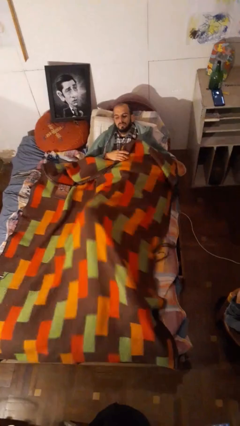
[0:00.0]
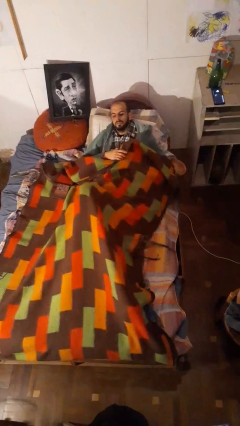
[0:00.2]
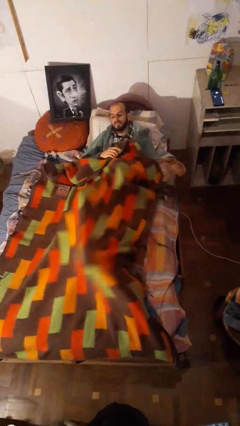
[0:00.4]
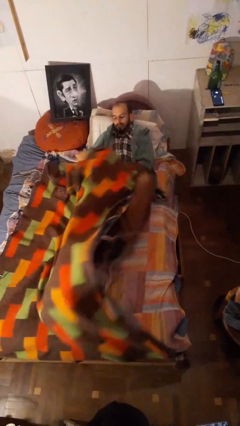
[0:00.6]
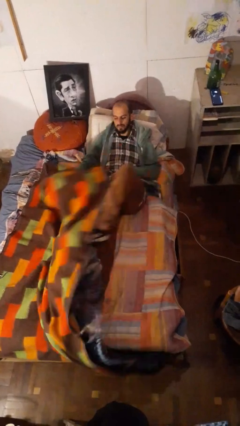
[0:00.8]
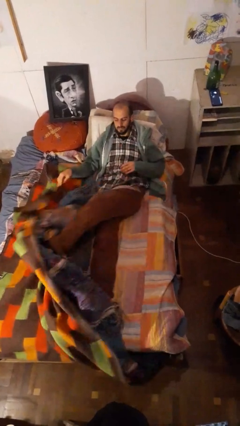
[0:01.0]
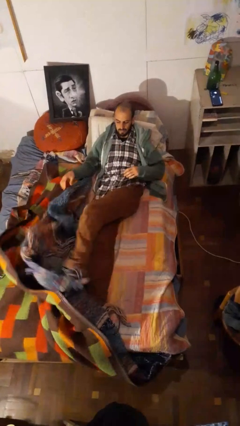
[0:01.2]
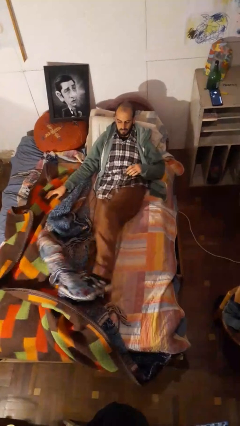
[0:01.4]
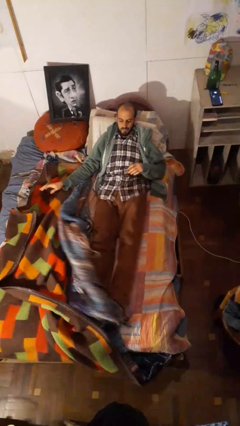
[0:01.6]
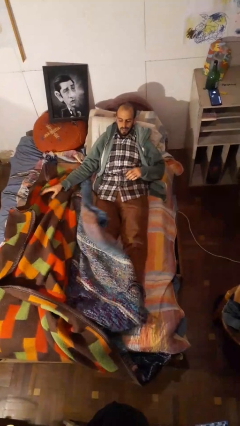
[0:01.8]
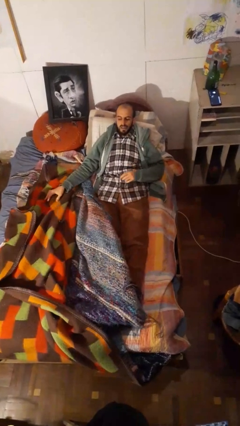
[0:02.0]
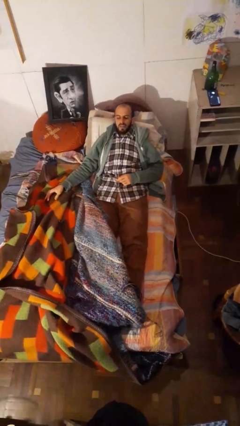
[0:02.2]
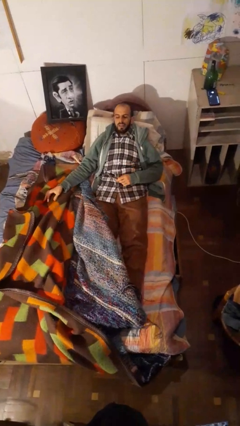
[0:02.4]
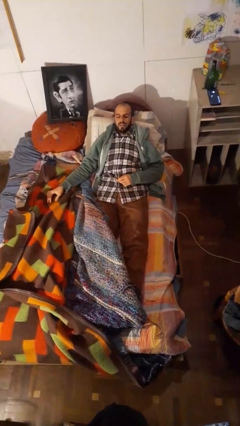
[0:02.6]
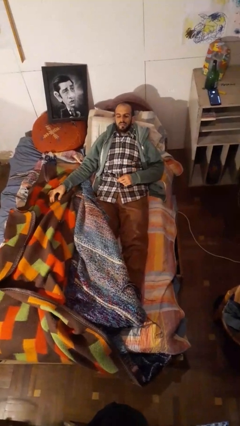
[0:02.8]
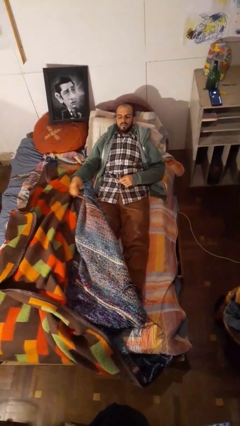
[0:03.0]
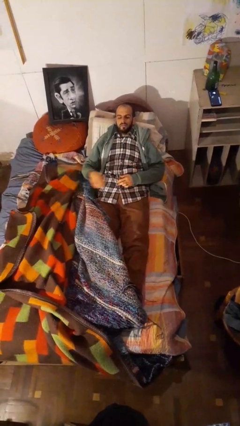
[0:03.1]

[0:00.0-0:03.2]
person uncovers with bedsheets

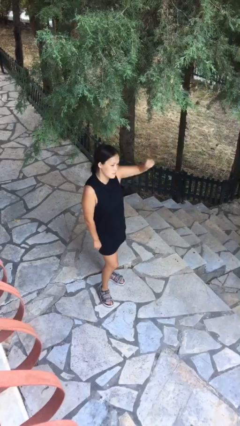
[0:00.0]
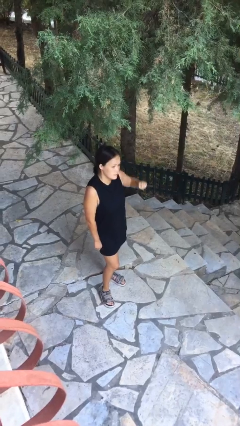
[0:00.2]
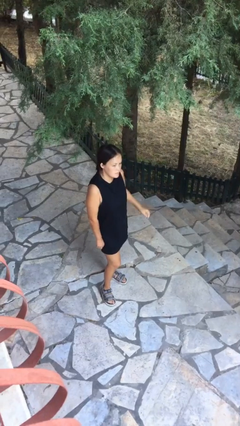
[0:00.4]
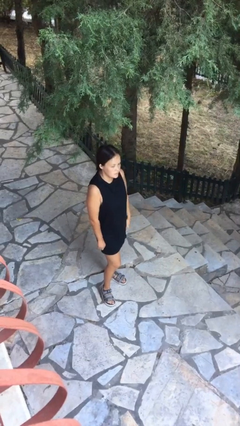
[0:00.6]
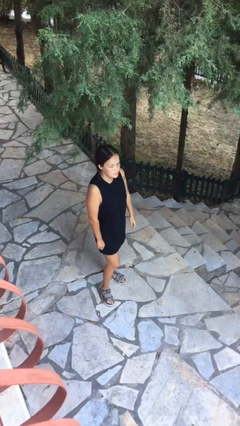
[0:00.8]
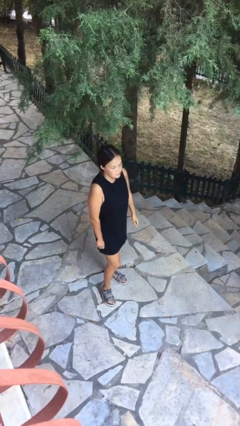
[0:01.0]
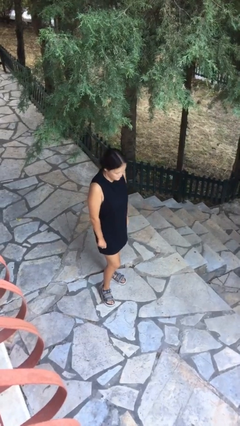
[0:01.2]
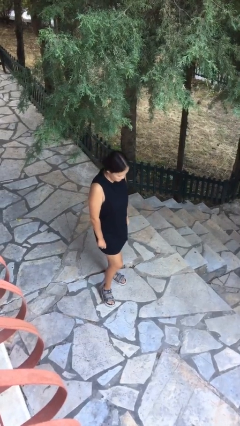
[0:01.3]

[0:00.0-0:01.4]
person gestures lower hand

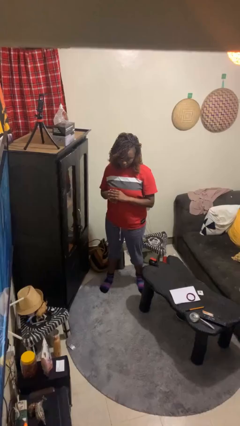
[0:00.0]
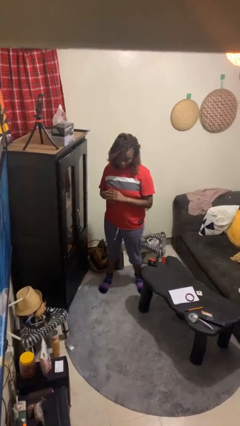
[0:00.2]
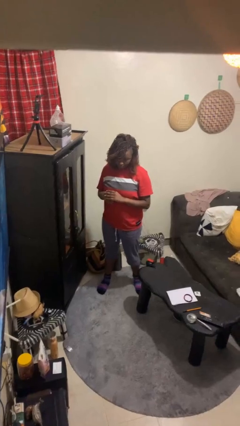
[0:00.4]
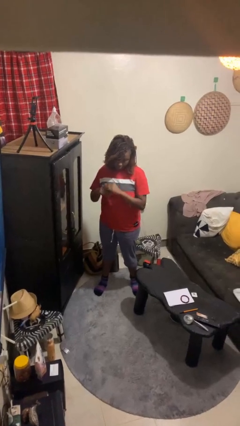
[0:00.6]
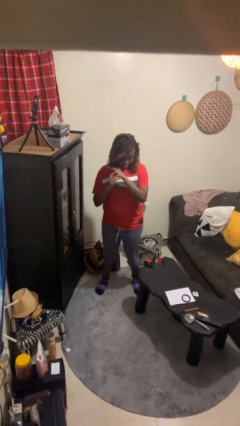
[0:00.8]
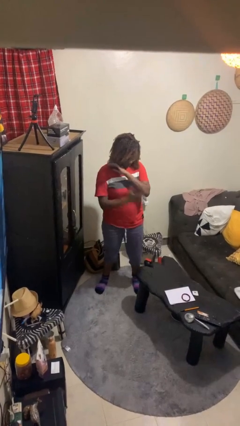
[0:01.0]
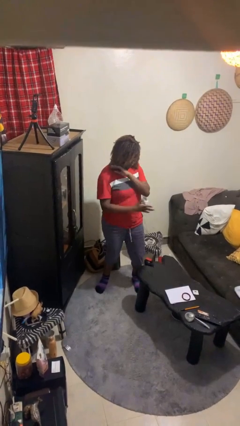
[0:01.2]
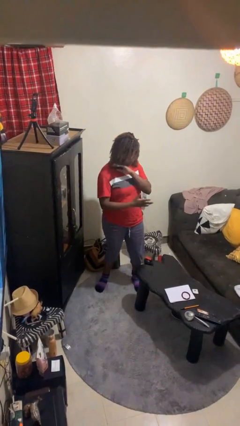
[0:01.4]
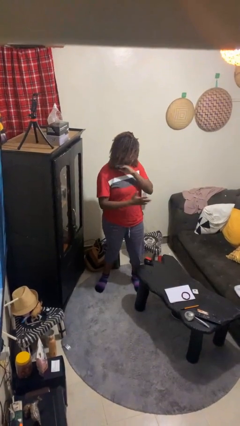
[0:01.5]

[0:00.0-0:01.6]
person karate chop

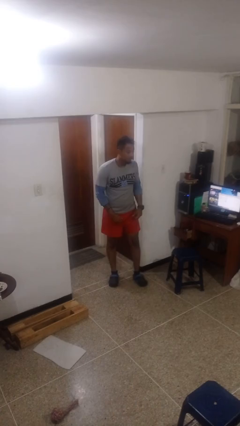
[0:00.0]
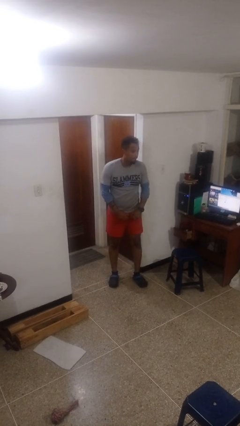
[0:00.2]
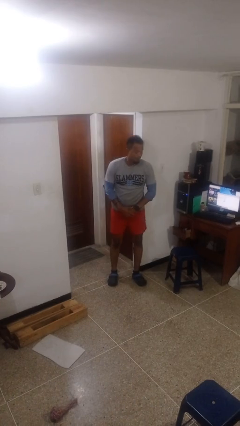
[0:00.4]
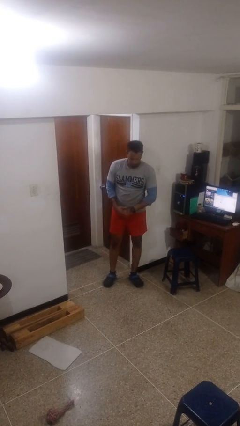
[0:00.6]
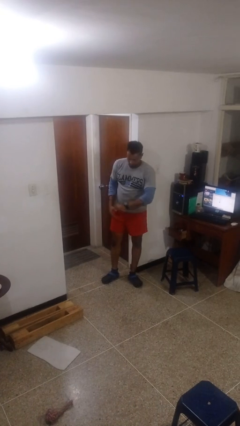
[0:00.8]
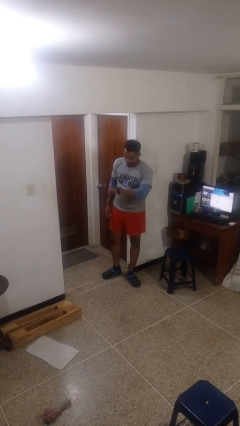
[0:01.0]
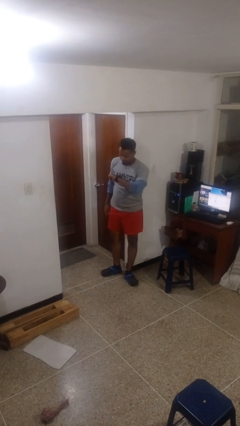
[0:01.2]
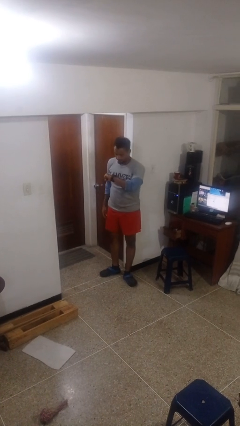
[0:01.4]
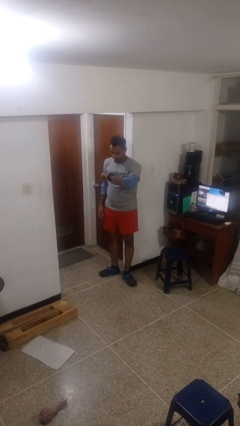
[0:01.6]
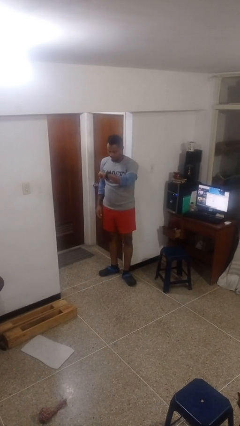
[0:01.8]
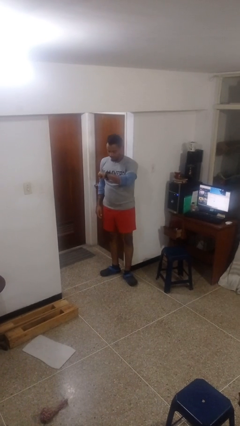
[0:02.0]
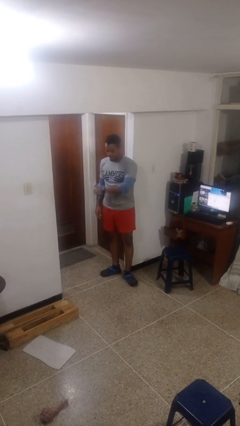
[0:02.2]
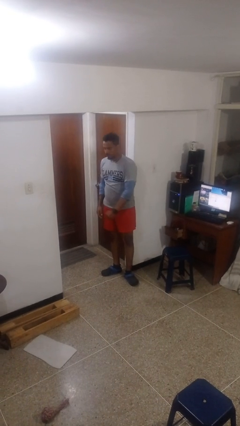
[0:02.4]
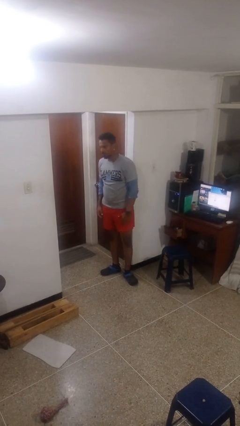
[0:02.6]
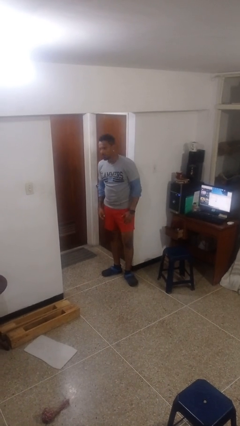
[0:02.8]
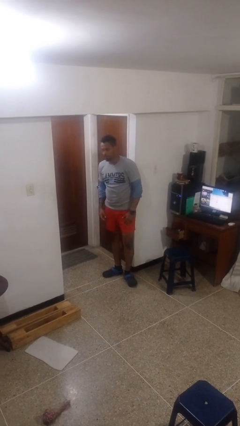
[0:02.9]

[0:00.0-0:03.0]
person looks at wristwatch

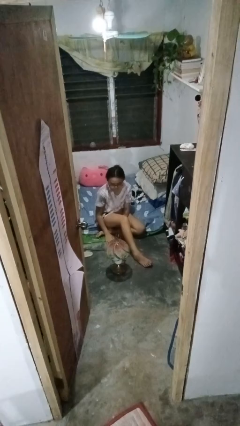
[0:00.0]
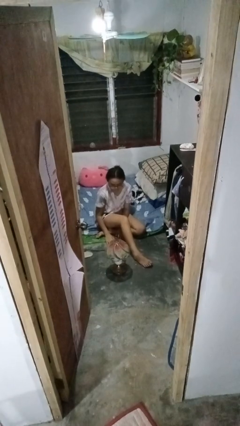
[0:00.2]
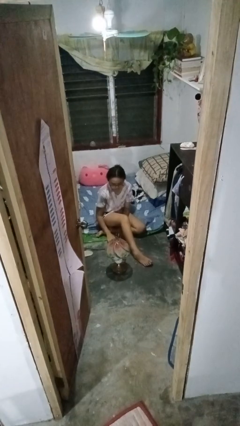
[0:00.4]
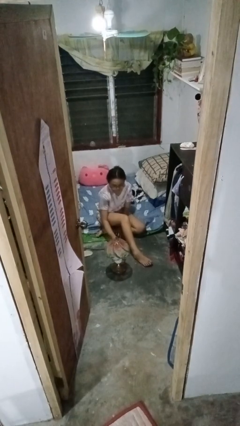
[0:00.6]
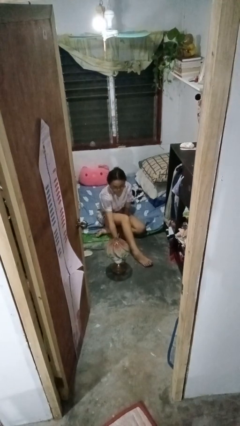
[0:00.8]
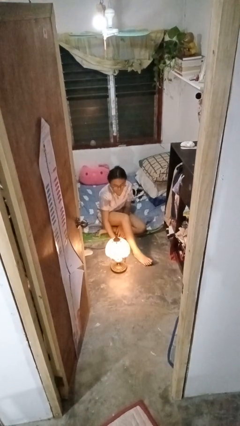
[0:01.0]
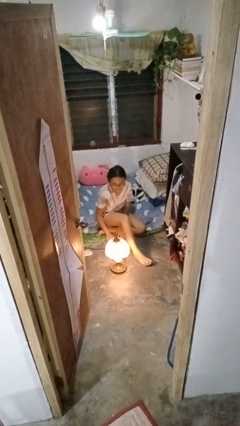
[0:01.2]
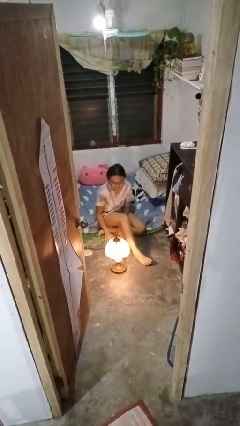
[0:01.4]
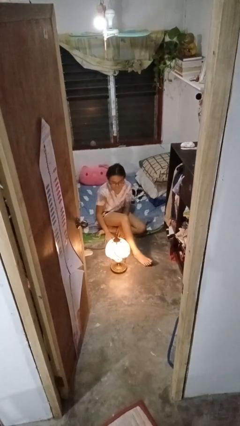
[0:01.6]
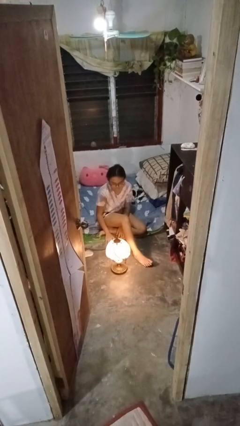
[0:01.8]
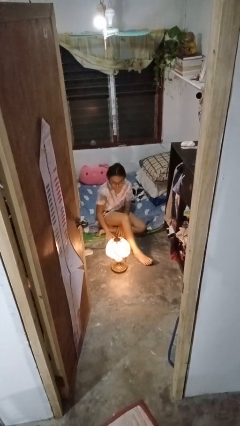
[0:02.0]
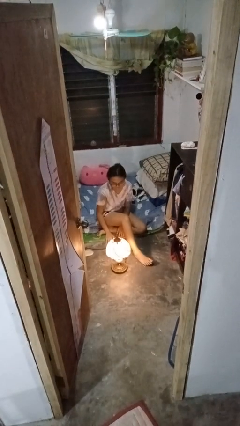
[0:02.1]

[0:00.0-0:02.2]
person turns on lamp

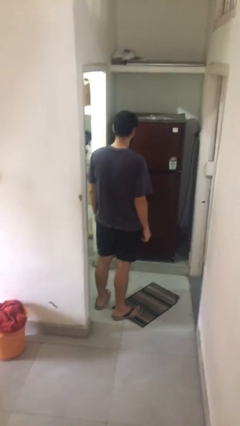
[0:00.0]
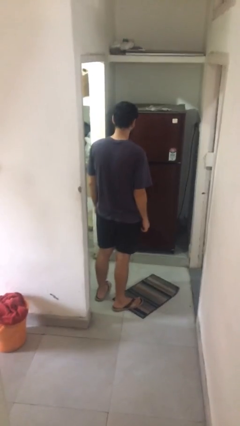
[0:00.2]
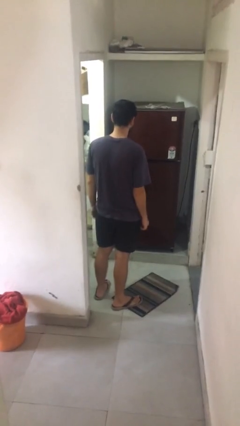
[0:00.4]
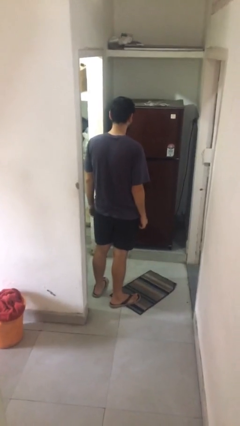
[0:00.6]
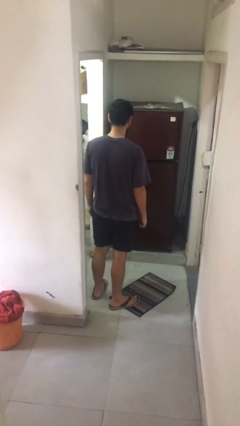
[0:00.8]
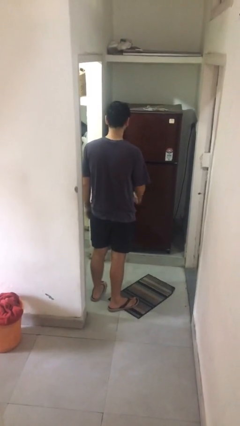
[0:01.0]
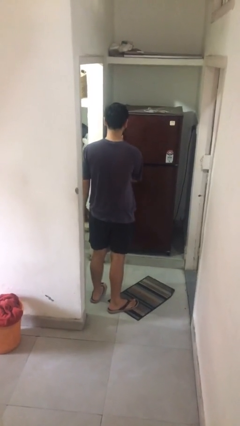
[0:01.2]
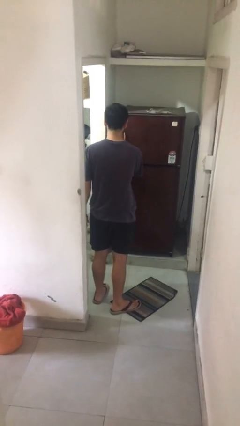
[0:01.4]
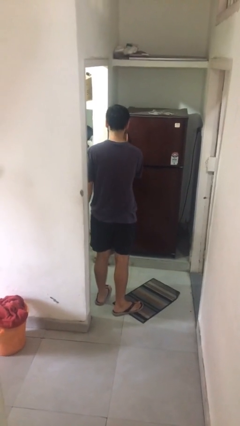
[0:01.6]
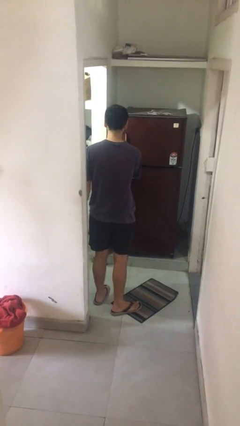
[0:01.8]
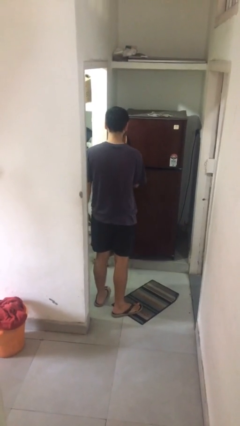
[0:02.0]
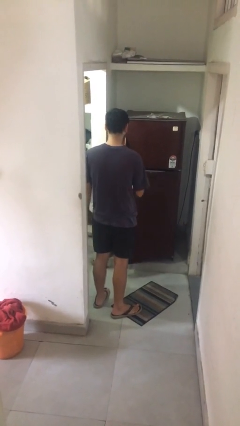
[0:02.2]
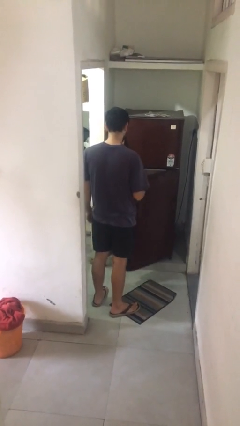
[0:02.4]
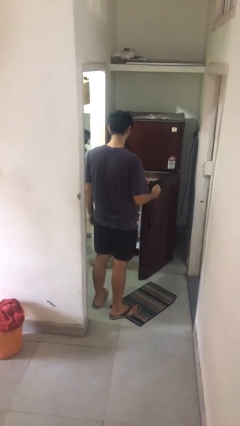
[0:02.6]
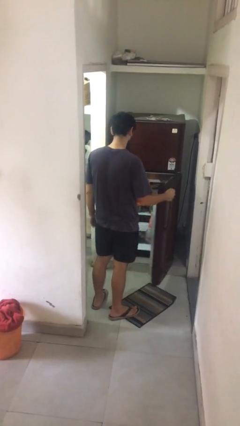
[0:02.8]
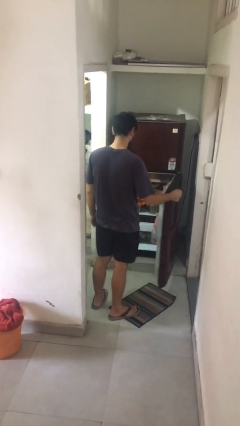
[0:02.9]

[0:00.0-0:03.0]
person opens refrigerator

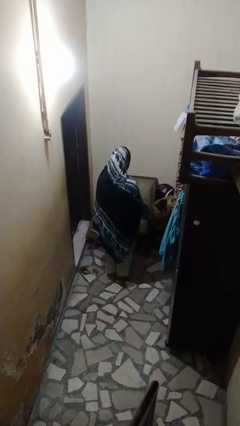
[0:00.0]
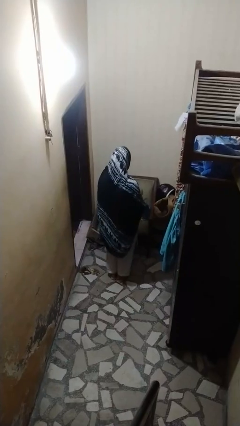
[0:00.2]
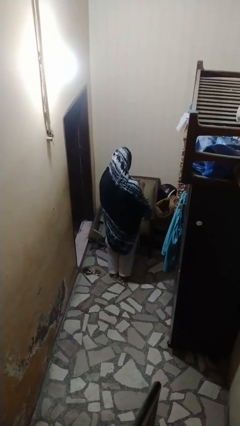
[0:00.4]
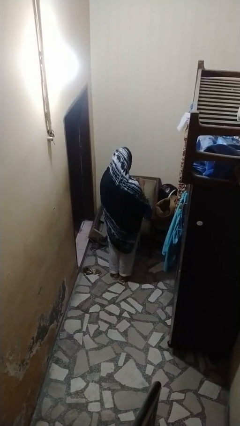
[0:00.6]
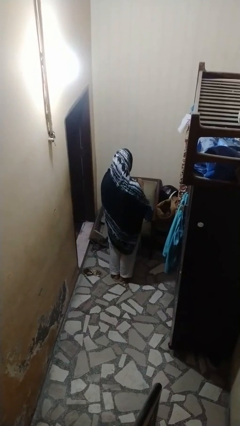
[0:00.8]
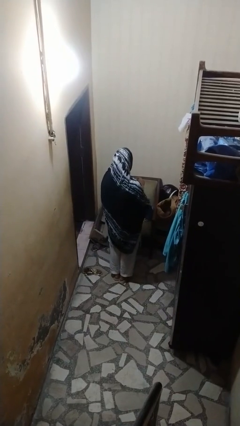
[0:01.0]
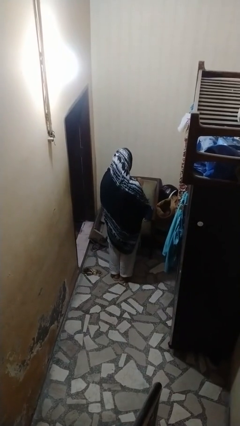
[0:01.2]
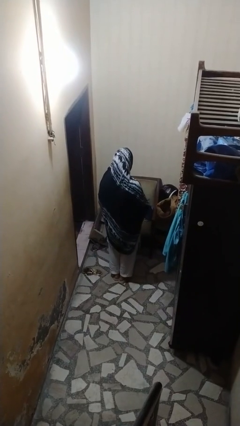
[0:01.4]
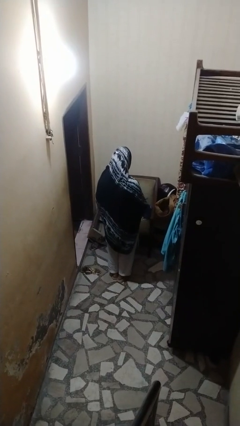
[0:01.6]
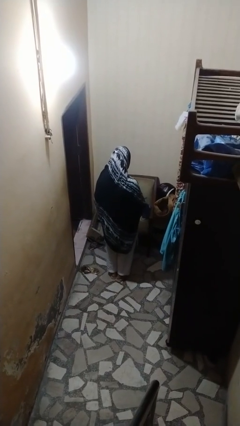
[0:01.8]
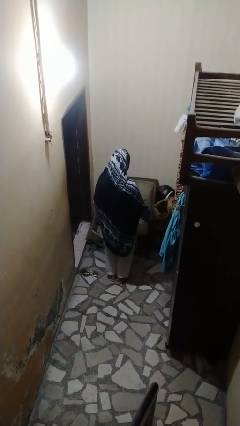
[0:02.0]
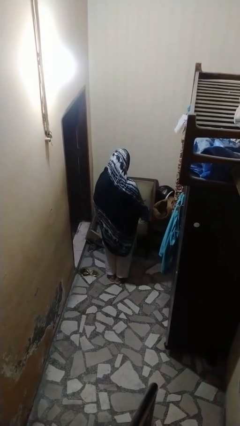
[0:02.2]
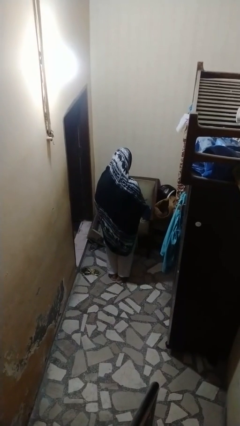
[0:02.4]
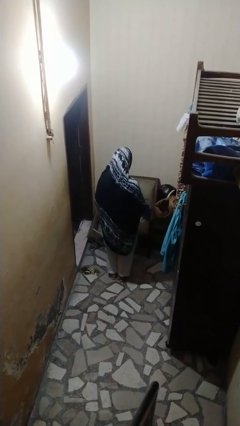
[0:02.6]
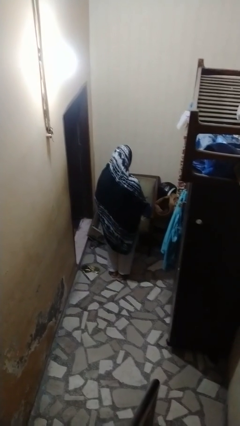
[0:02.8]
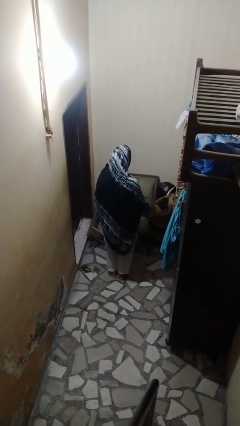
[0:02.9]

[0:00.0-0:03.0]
person stirs mug

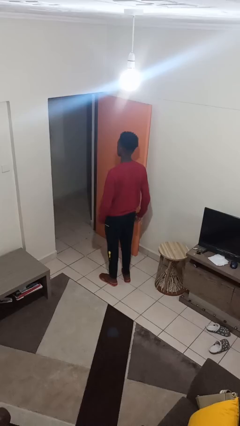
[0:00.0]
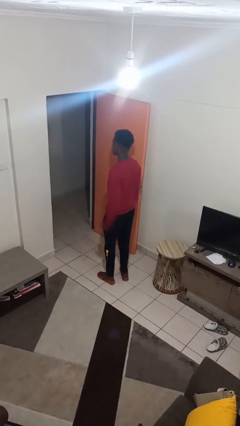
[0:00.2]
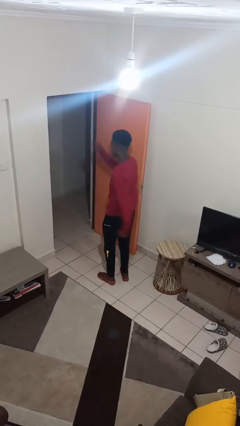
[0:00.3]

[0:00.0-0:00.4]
person punches
